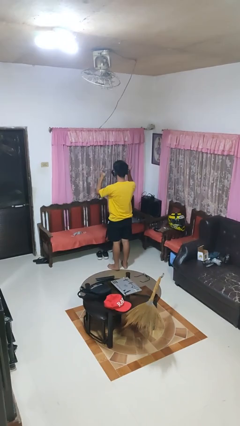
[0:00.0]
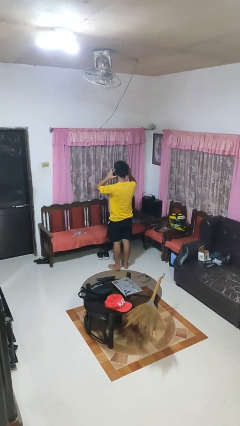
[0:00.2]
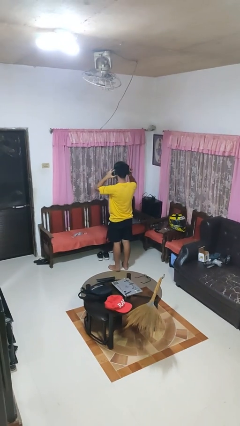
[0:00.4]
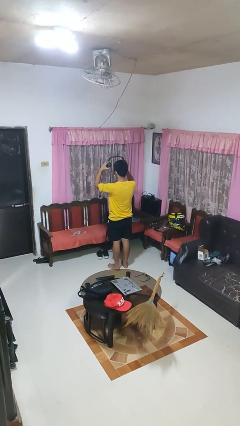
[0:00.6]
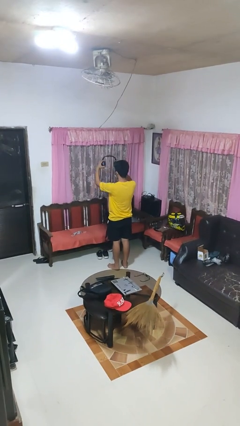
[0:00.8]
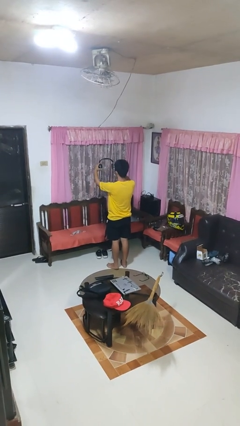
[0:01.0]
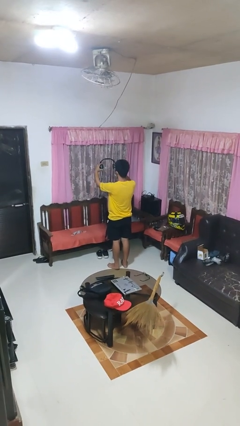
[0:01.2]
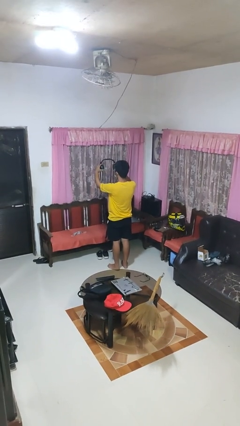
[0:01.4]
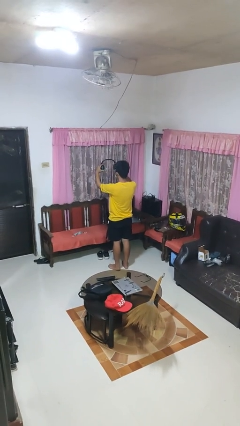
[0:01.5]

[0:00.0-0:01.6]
person takes off headphones

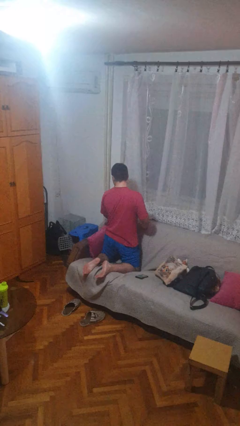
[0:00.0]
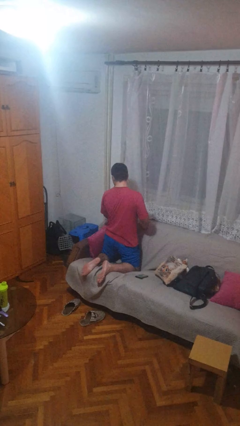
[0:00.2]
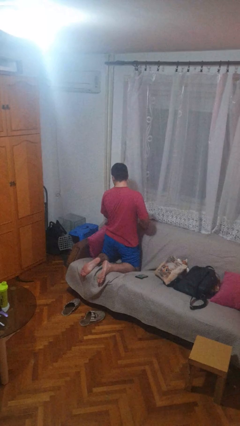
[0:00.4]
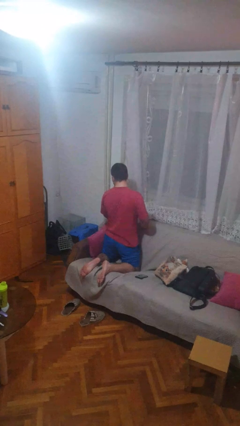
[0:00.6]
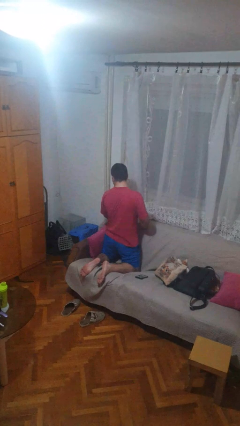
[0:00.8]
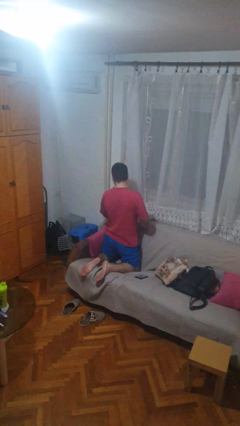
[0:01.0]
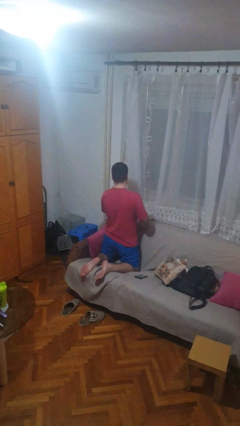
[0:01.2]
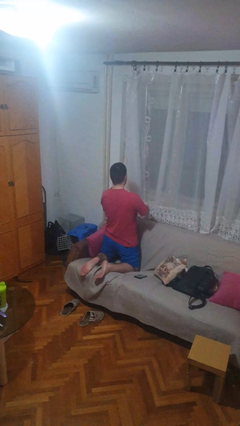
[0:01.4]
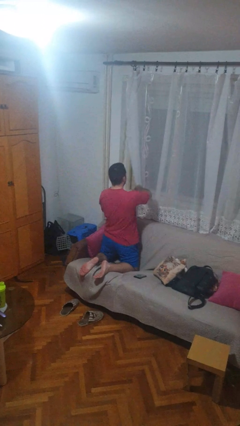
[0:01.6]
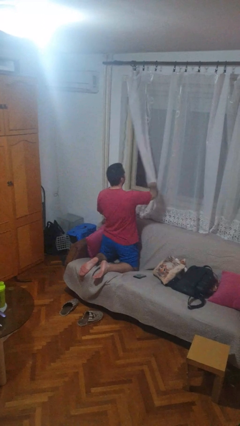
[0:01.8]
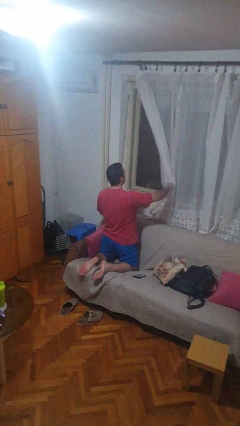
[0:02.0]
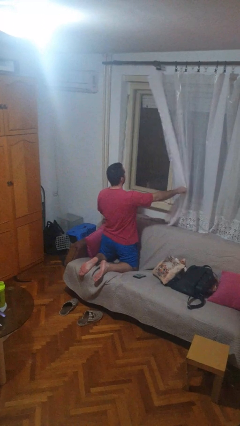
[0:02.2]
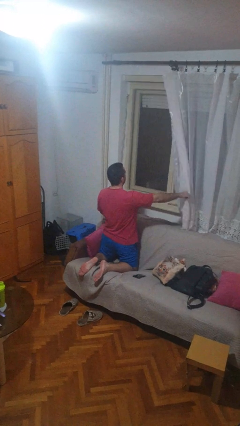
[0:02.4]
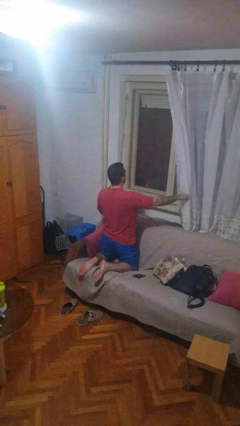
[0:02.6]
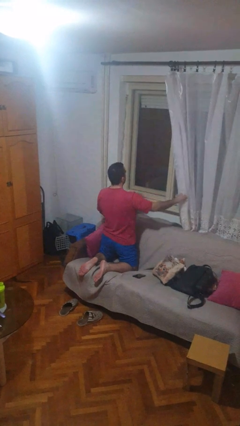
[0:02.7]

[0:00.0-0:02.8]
person opens curtains

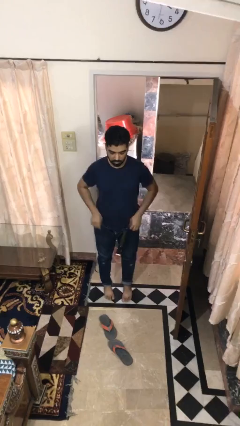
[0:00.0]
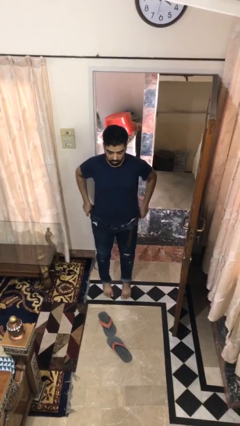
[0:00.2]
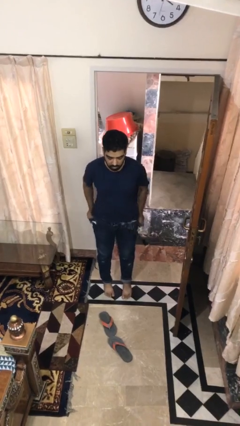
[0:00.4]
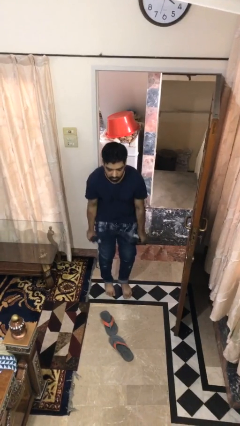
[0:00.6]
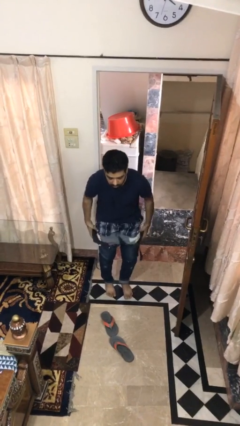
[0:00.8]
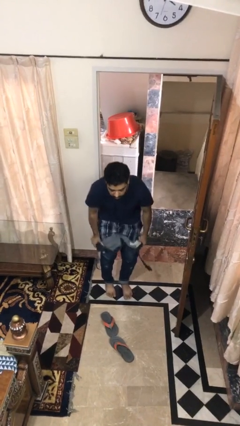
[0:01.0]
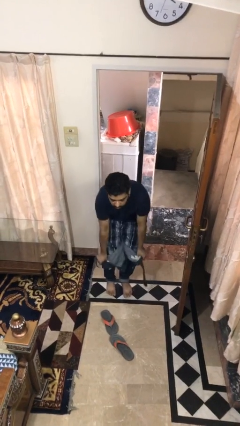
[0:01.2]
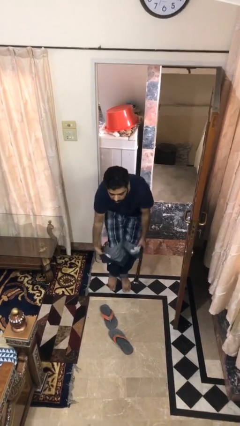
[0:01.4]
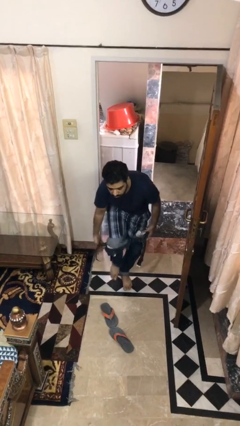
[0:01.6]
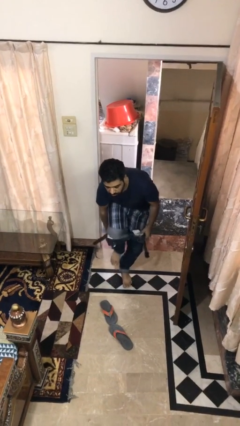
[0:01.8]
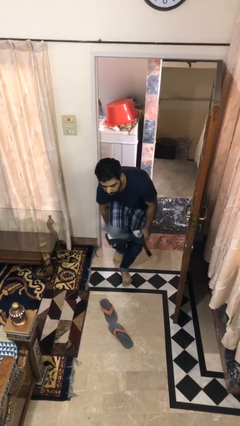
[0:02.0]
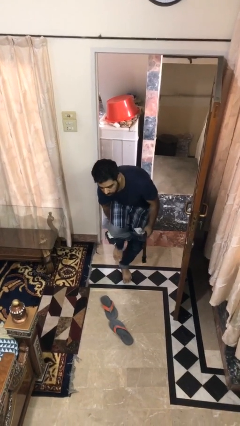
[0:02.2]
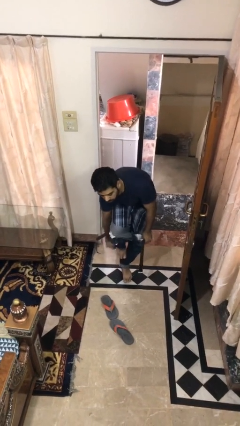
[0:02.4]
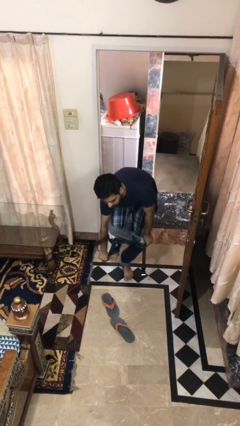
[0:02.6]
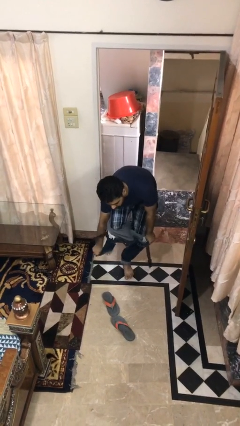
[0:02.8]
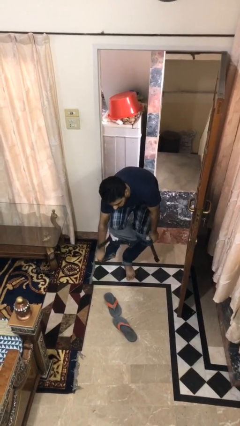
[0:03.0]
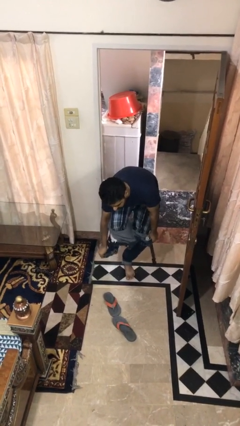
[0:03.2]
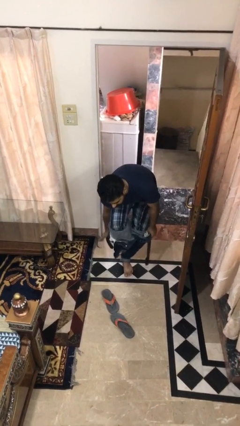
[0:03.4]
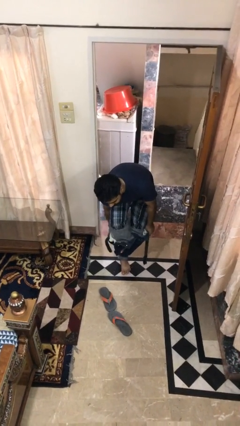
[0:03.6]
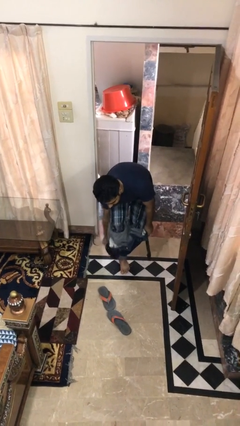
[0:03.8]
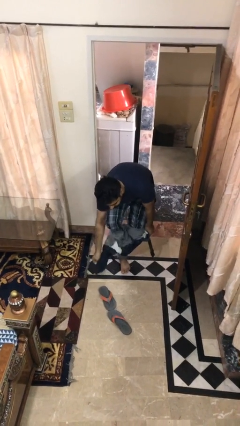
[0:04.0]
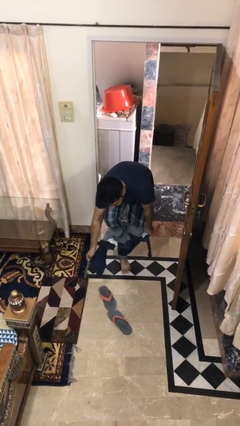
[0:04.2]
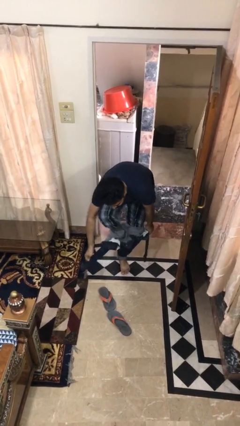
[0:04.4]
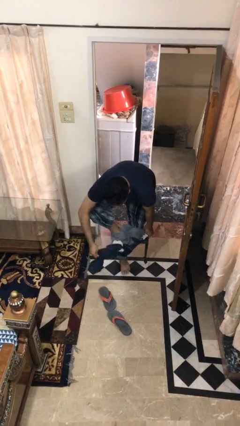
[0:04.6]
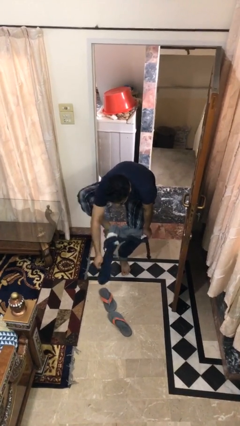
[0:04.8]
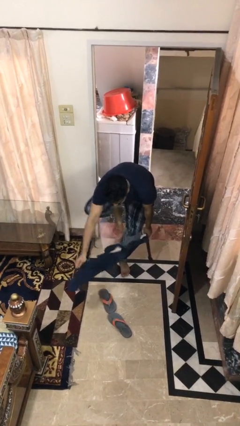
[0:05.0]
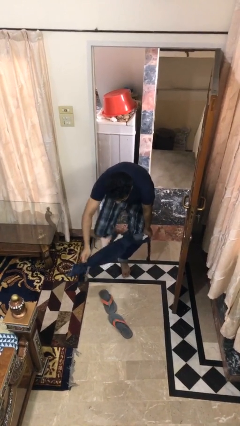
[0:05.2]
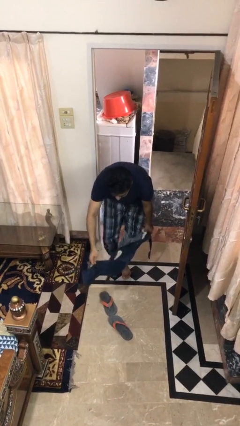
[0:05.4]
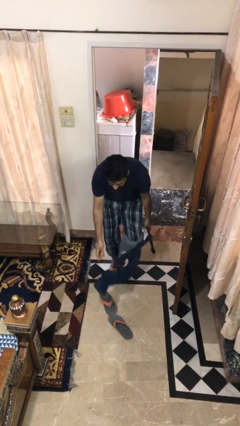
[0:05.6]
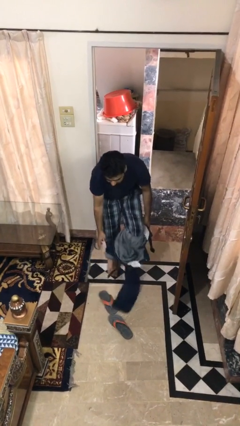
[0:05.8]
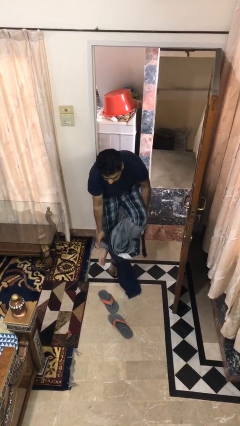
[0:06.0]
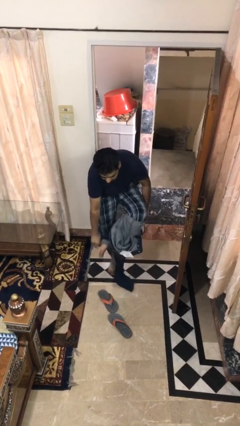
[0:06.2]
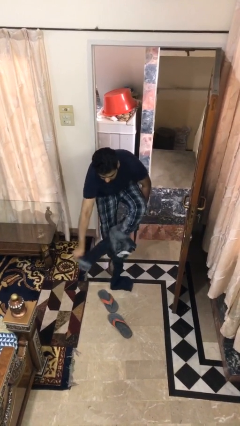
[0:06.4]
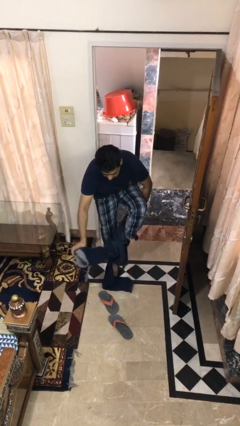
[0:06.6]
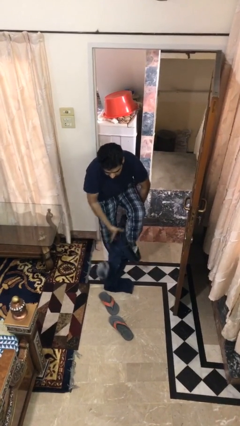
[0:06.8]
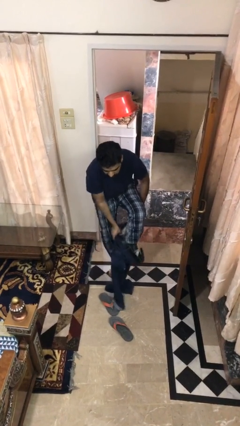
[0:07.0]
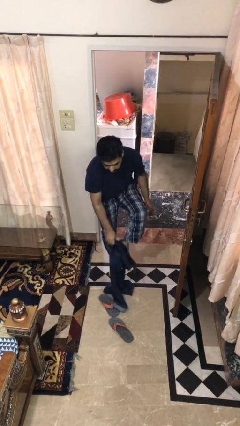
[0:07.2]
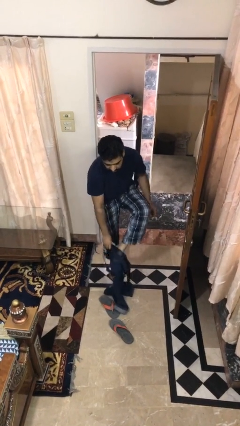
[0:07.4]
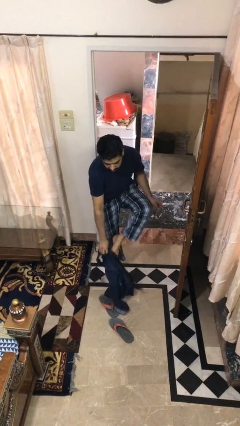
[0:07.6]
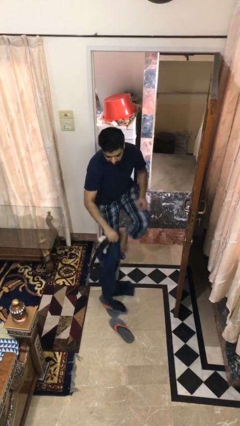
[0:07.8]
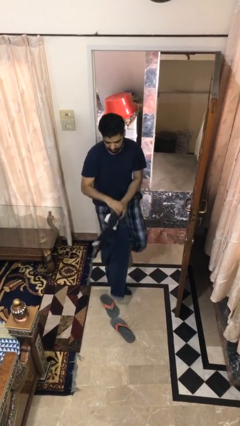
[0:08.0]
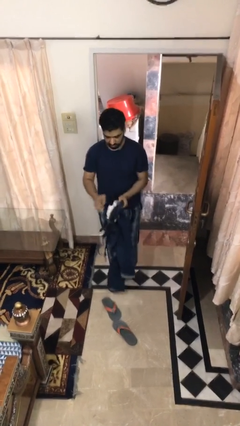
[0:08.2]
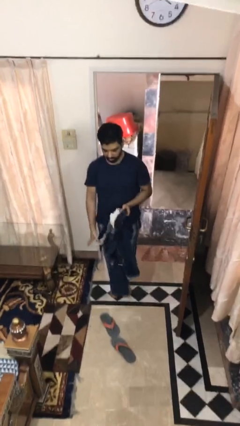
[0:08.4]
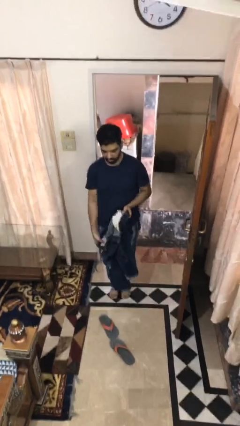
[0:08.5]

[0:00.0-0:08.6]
person takes off pants

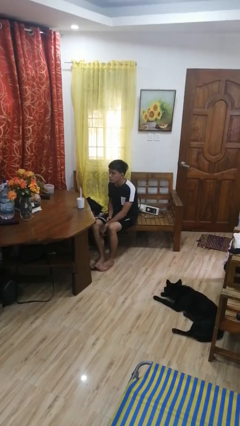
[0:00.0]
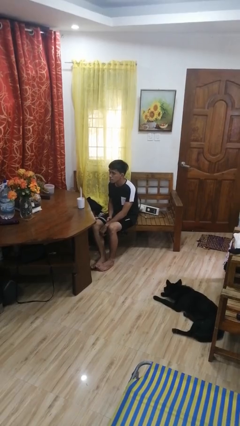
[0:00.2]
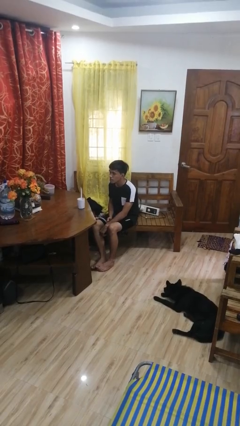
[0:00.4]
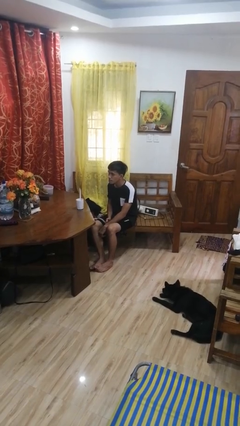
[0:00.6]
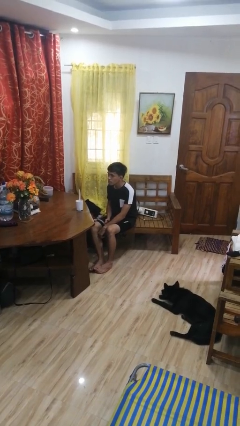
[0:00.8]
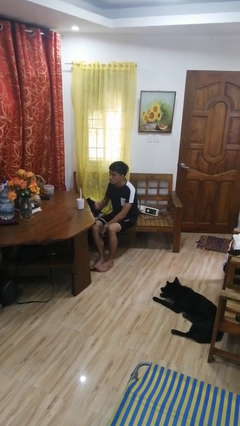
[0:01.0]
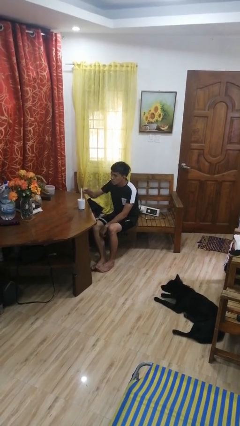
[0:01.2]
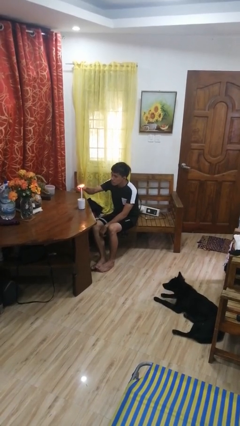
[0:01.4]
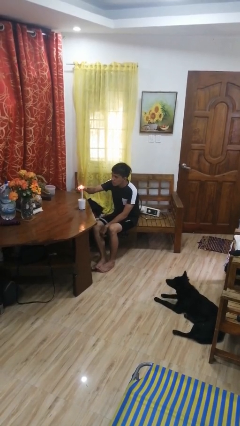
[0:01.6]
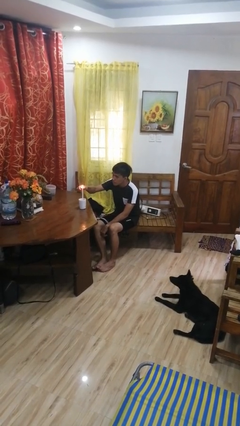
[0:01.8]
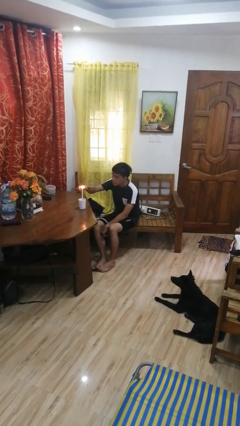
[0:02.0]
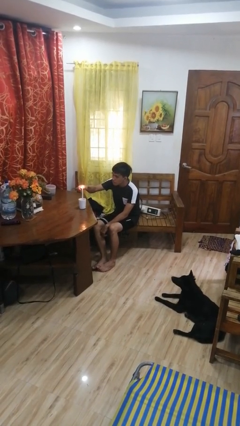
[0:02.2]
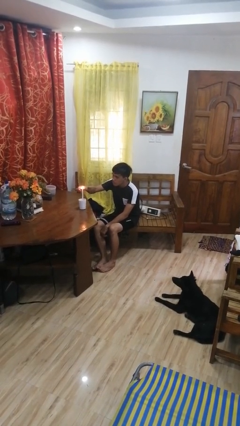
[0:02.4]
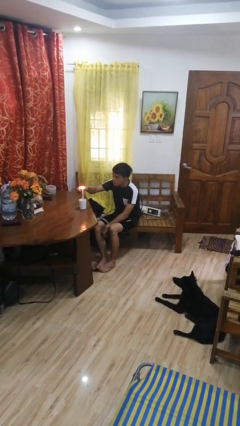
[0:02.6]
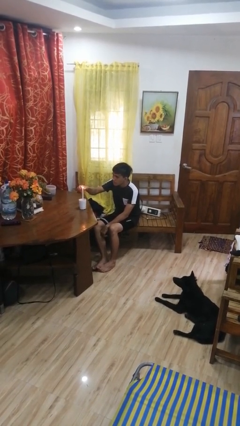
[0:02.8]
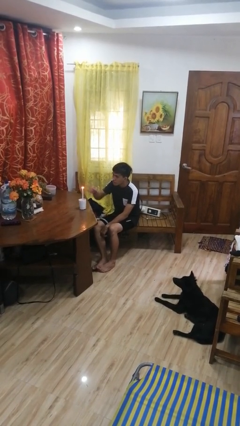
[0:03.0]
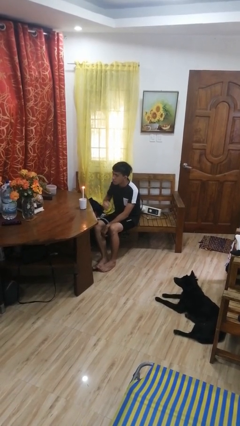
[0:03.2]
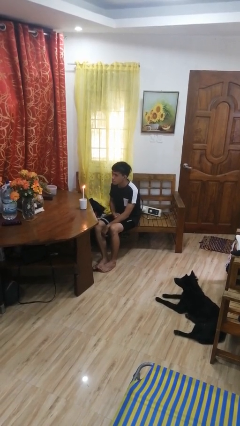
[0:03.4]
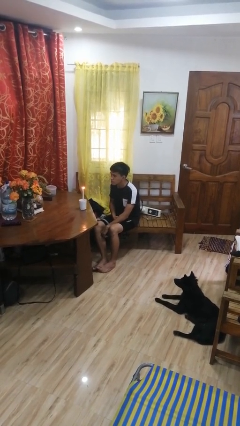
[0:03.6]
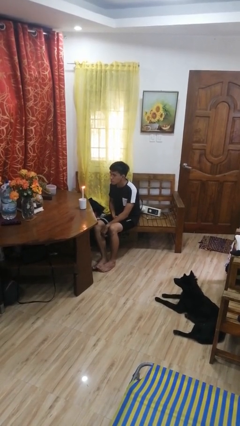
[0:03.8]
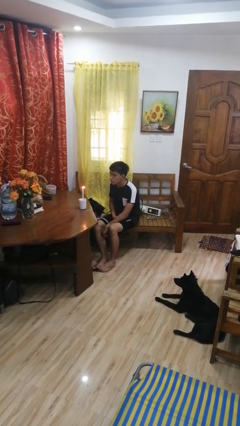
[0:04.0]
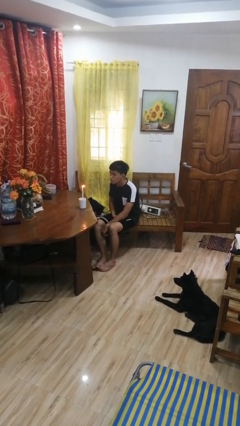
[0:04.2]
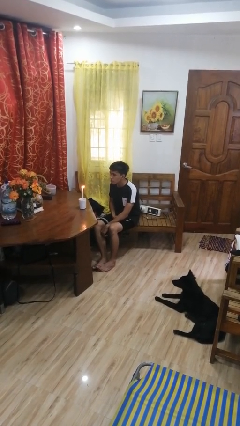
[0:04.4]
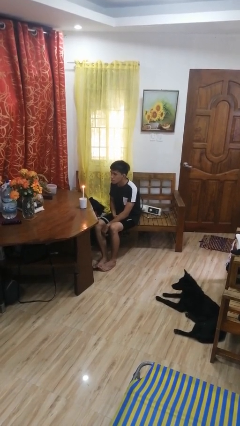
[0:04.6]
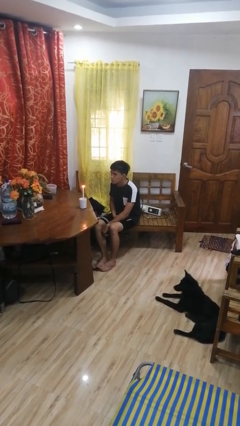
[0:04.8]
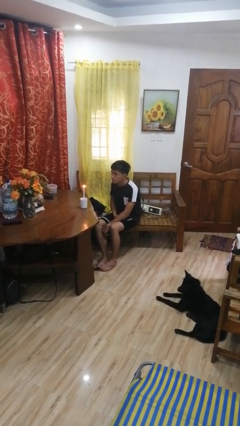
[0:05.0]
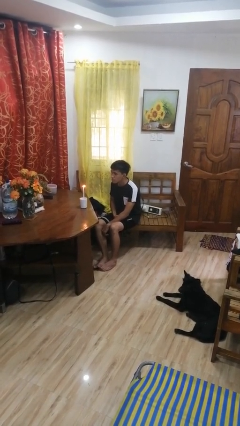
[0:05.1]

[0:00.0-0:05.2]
person lights candle
